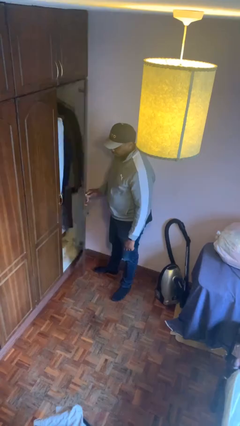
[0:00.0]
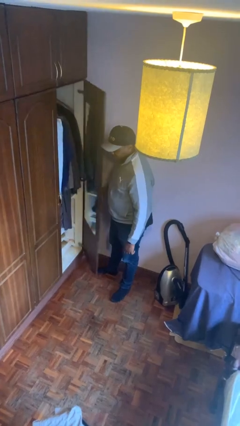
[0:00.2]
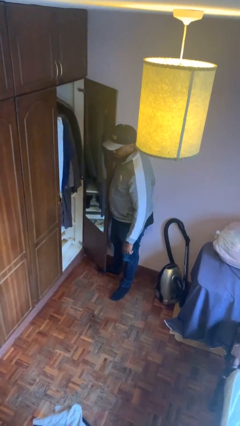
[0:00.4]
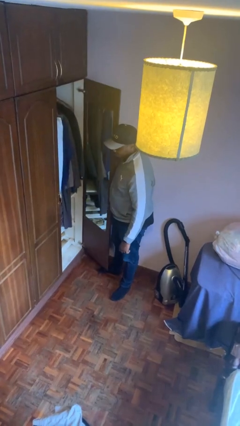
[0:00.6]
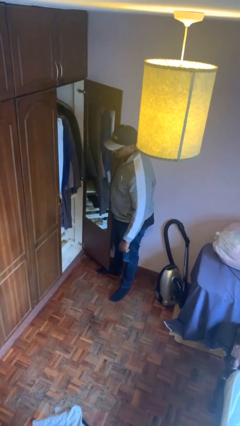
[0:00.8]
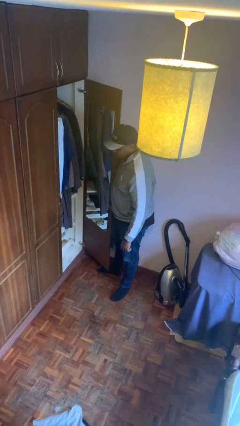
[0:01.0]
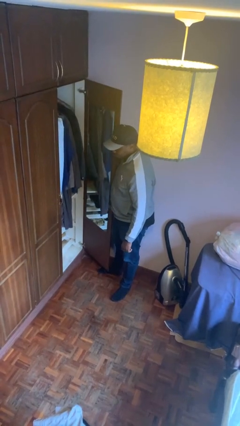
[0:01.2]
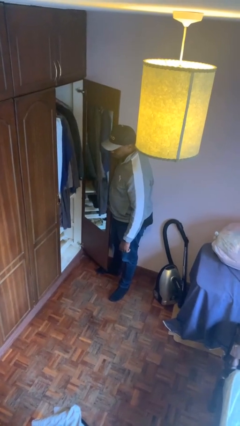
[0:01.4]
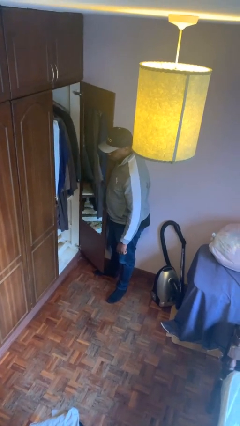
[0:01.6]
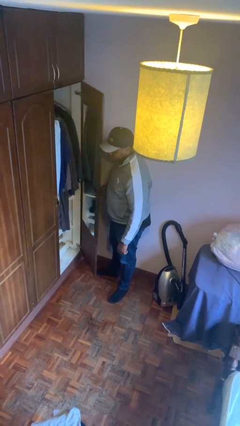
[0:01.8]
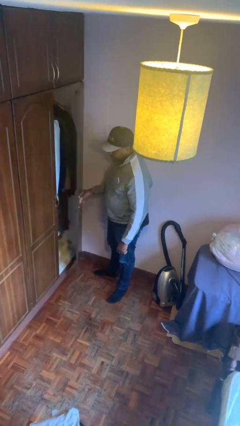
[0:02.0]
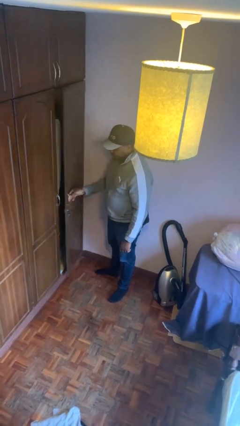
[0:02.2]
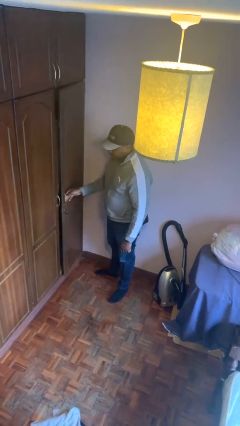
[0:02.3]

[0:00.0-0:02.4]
person opens closet door

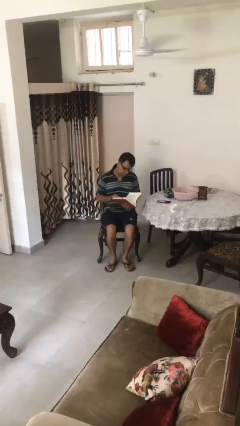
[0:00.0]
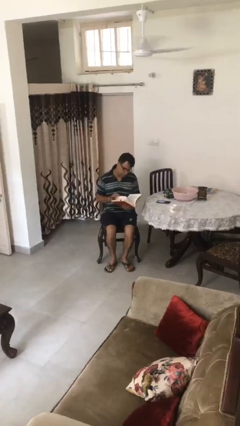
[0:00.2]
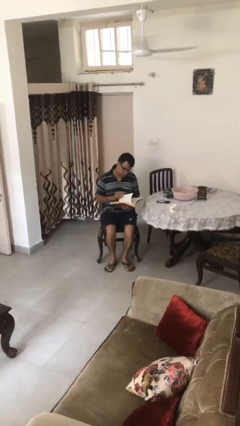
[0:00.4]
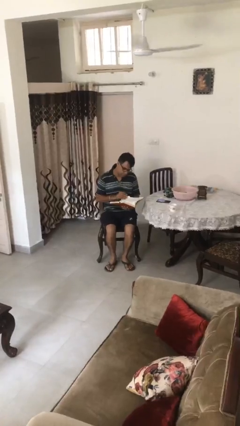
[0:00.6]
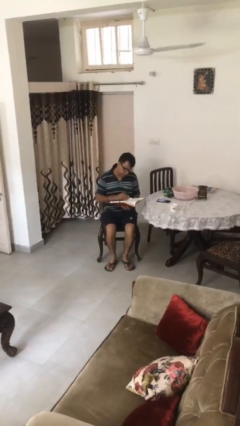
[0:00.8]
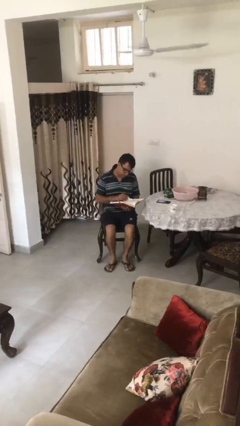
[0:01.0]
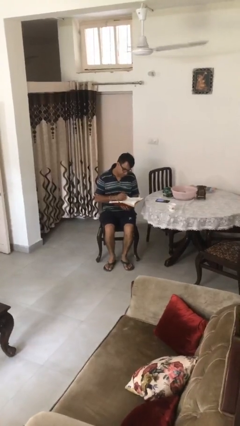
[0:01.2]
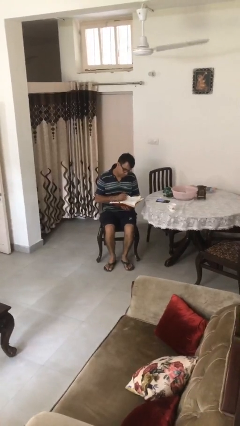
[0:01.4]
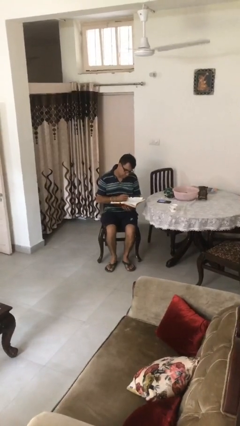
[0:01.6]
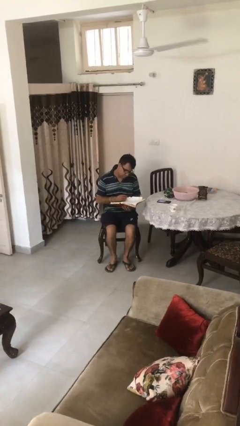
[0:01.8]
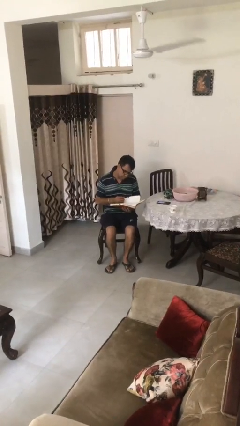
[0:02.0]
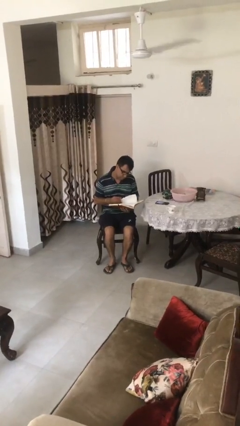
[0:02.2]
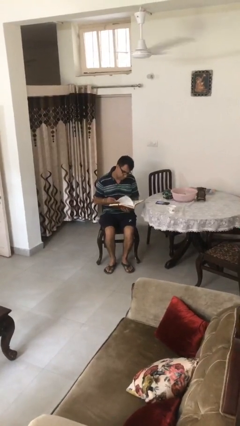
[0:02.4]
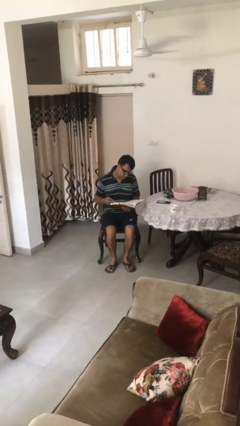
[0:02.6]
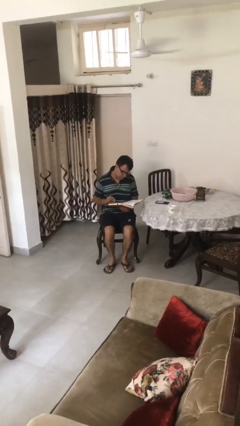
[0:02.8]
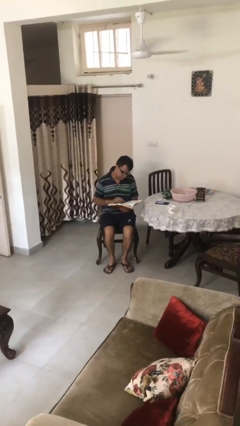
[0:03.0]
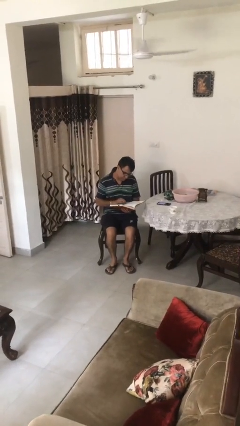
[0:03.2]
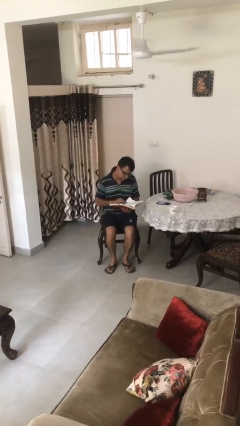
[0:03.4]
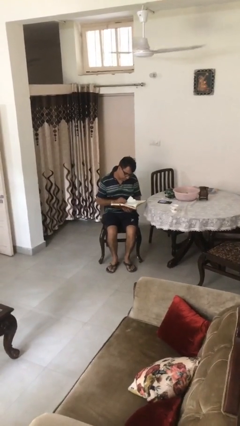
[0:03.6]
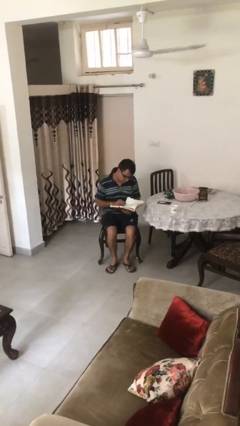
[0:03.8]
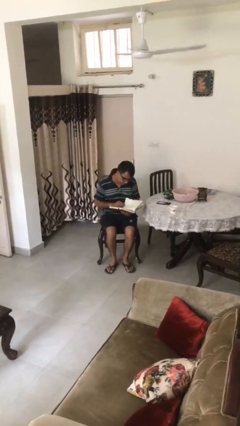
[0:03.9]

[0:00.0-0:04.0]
person reads document

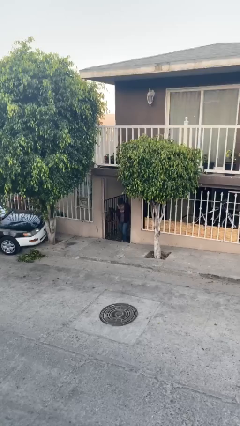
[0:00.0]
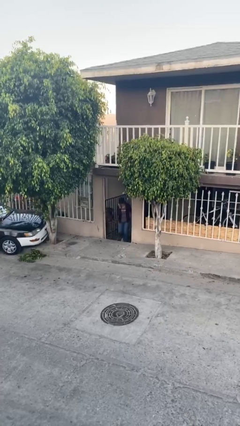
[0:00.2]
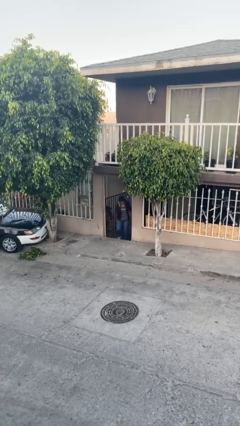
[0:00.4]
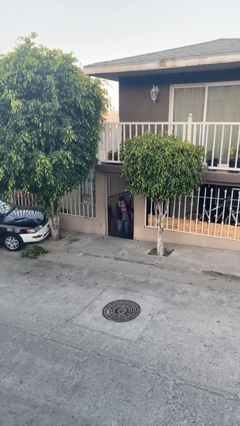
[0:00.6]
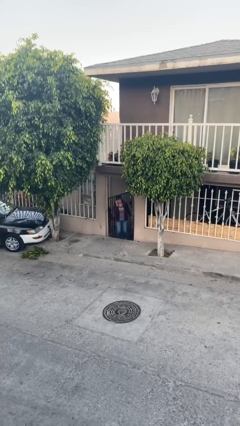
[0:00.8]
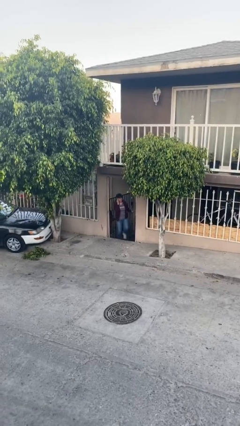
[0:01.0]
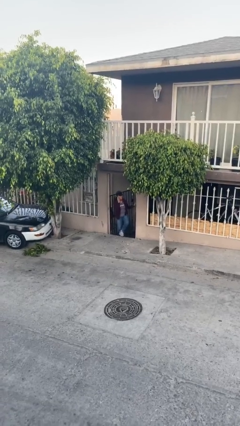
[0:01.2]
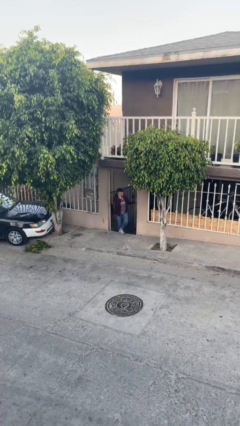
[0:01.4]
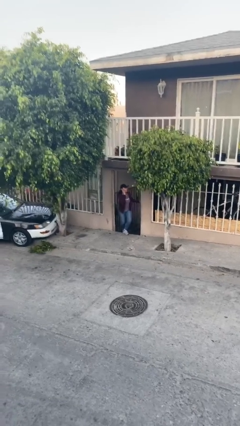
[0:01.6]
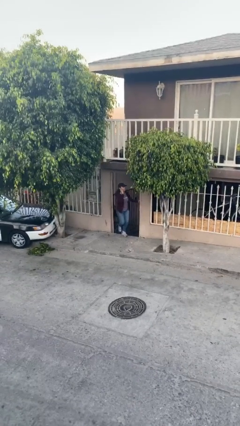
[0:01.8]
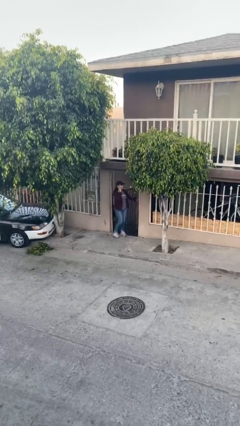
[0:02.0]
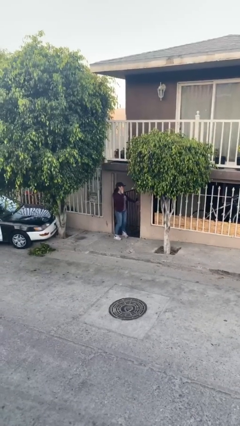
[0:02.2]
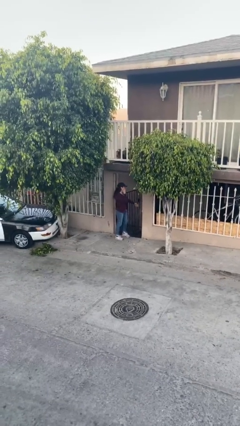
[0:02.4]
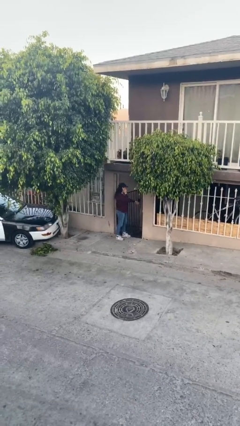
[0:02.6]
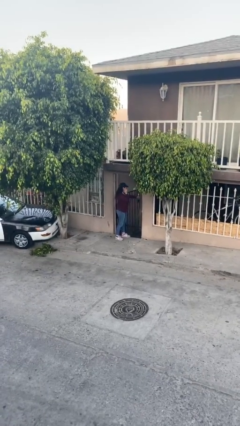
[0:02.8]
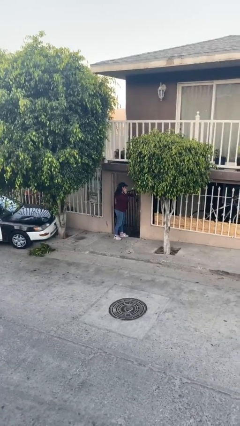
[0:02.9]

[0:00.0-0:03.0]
person enters scene through structure

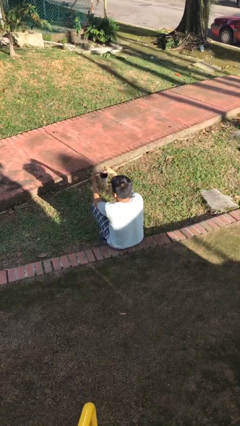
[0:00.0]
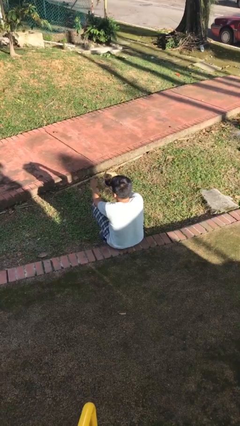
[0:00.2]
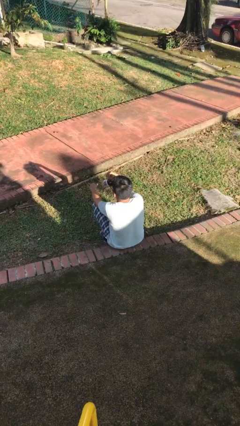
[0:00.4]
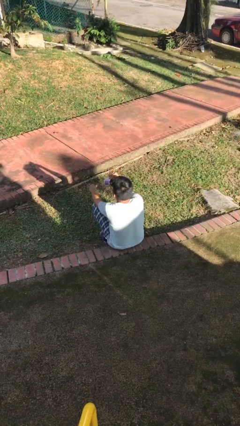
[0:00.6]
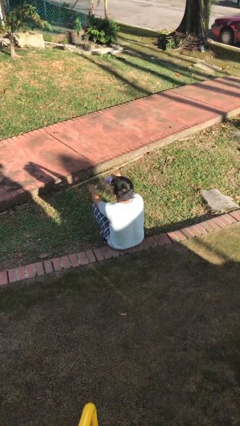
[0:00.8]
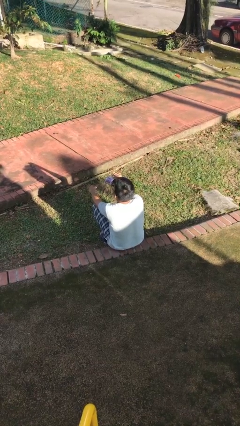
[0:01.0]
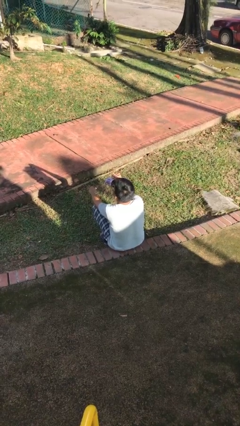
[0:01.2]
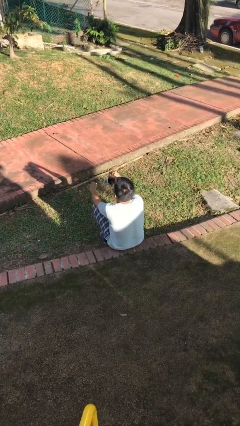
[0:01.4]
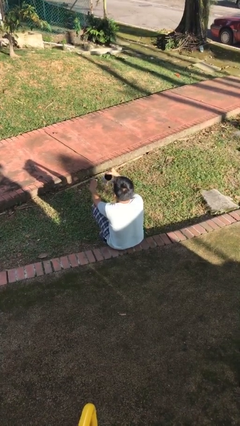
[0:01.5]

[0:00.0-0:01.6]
person drinks from mug

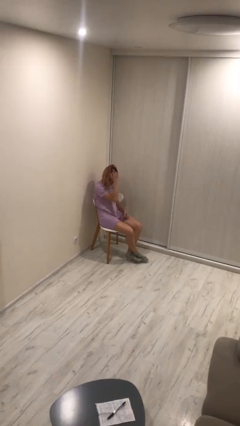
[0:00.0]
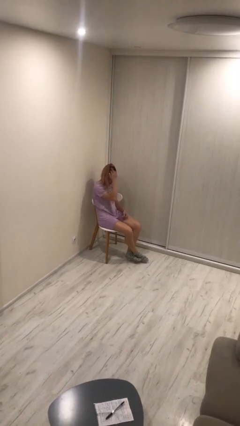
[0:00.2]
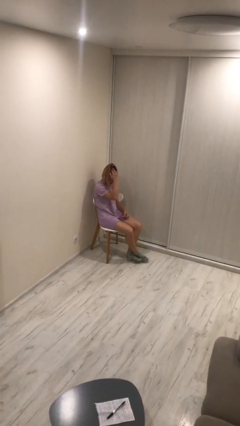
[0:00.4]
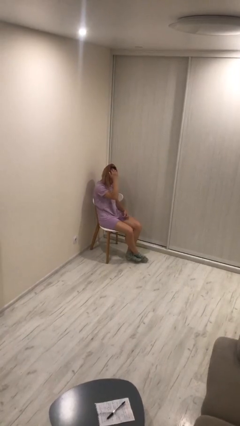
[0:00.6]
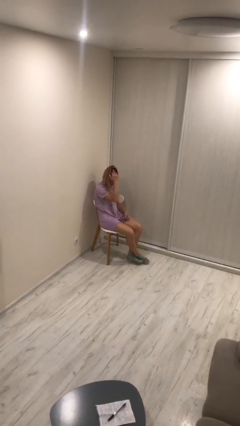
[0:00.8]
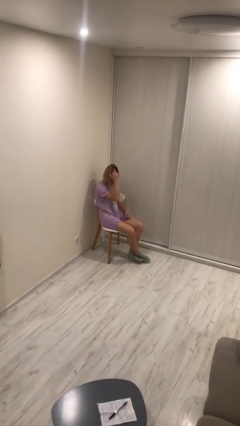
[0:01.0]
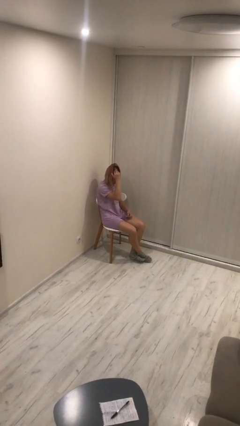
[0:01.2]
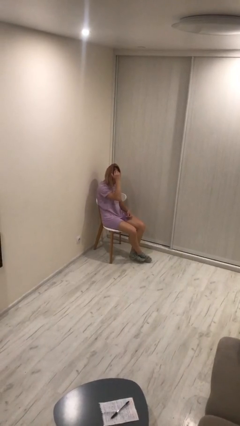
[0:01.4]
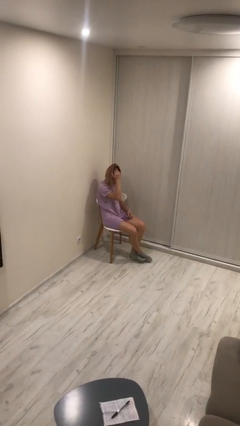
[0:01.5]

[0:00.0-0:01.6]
person scratches face

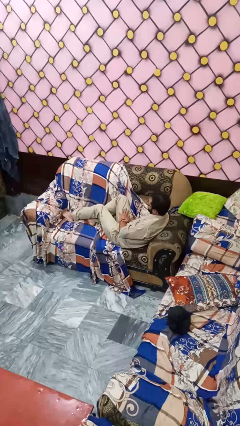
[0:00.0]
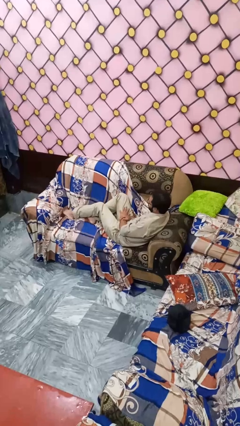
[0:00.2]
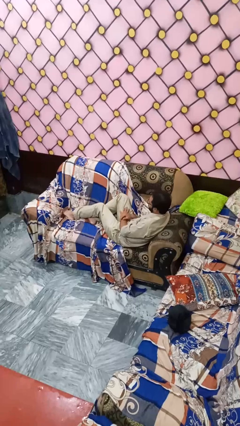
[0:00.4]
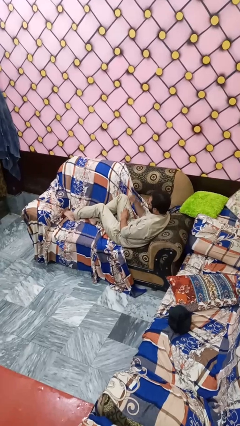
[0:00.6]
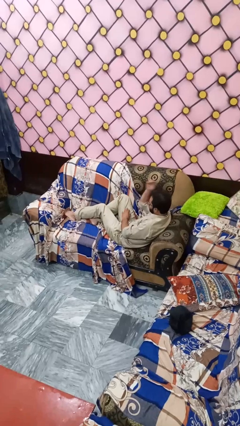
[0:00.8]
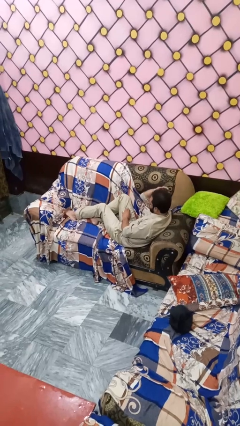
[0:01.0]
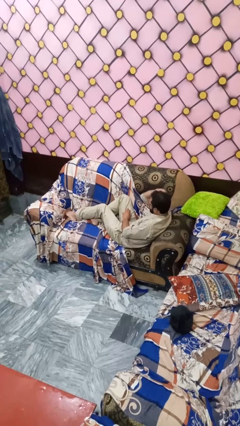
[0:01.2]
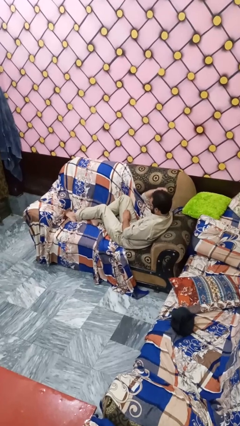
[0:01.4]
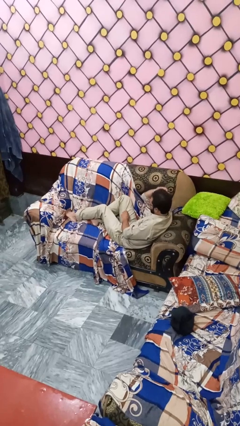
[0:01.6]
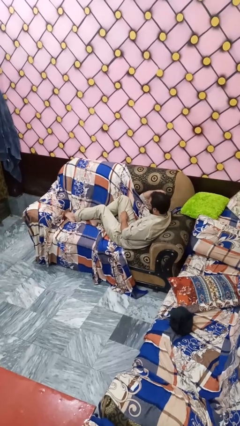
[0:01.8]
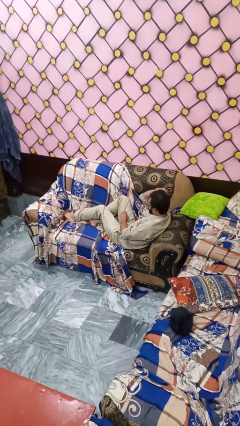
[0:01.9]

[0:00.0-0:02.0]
person pats head

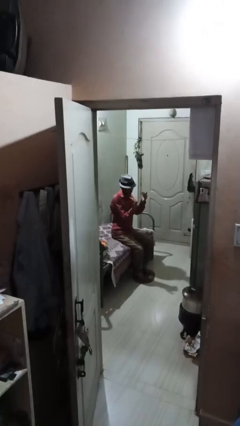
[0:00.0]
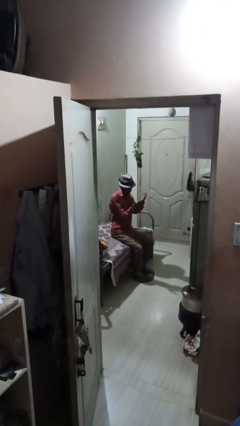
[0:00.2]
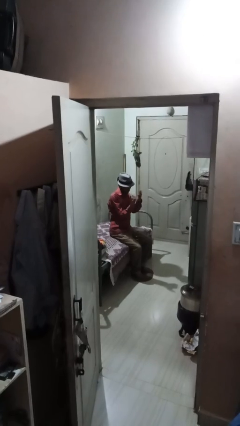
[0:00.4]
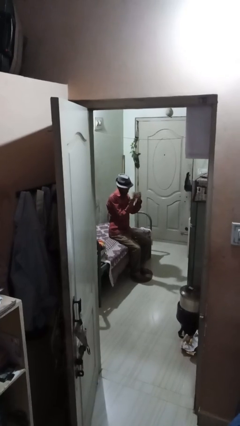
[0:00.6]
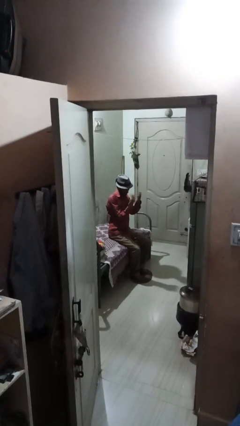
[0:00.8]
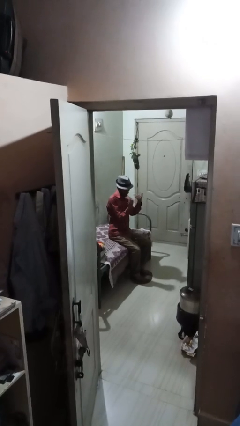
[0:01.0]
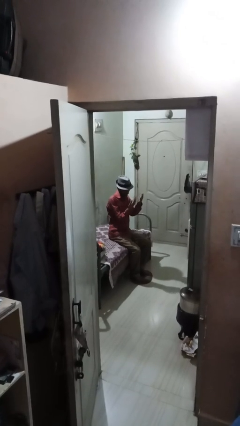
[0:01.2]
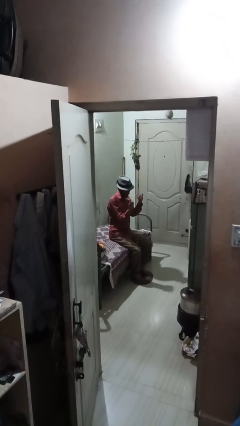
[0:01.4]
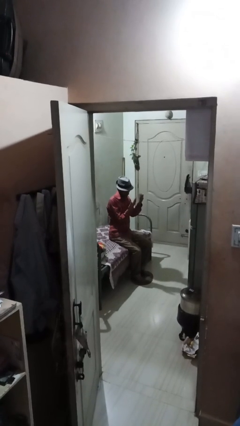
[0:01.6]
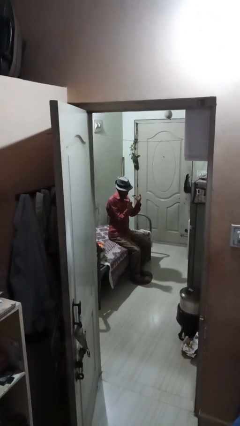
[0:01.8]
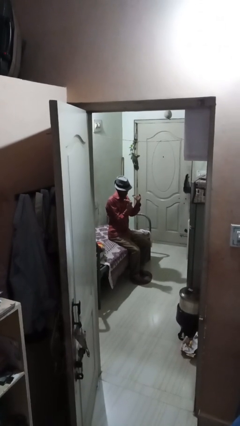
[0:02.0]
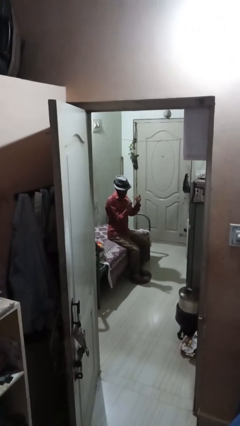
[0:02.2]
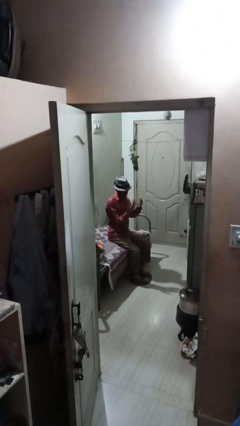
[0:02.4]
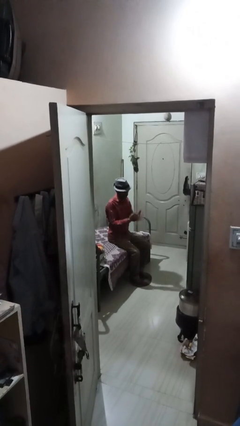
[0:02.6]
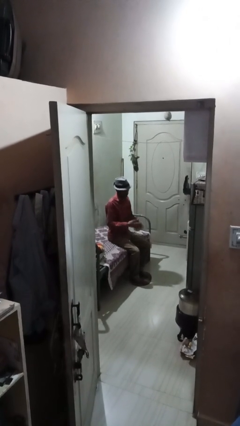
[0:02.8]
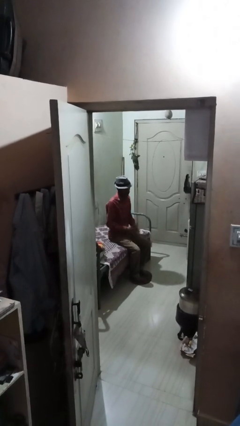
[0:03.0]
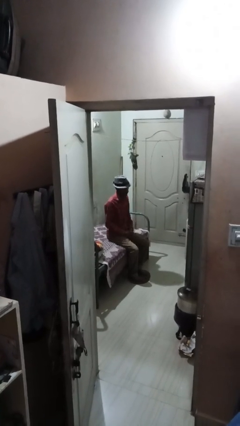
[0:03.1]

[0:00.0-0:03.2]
person gestures come here
